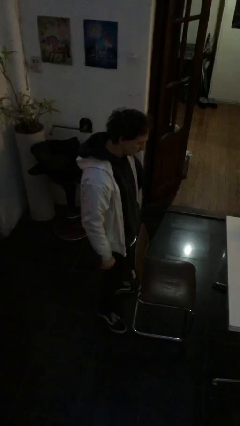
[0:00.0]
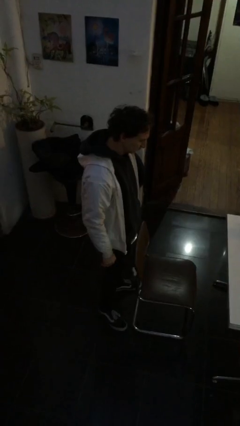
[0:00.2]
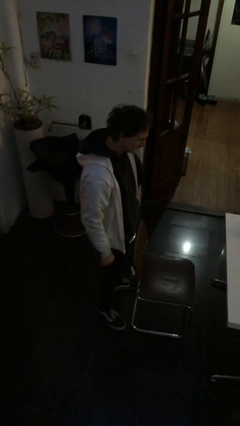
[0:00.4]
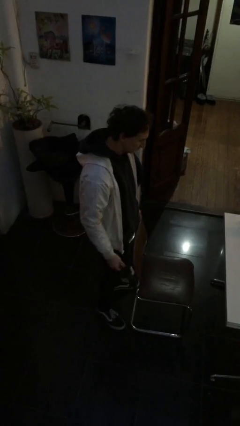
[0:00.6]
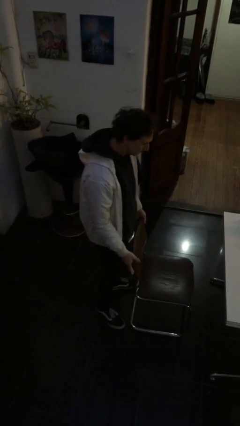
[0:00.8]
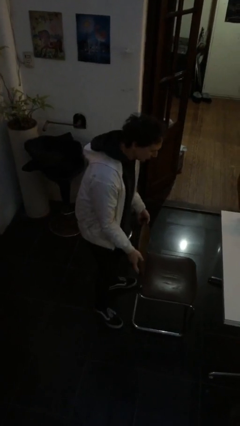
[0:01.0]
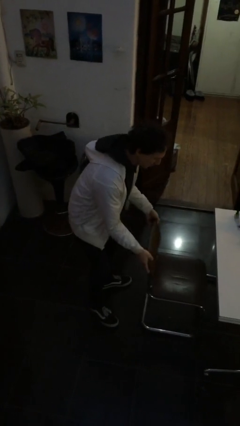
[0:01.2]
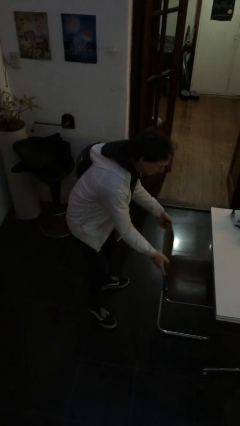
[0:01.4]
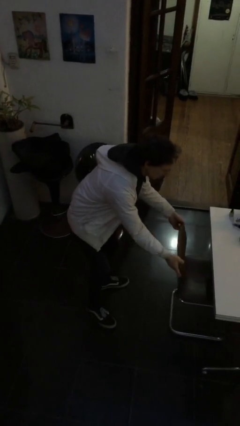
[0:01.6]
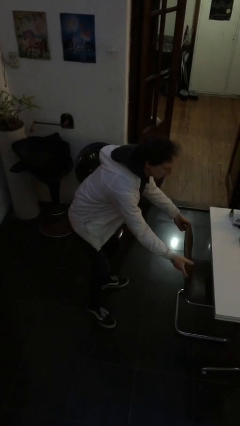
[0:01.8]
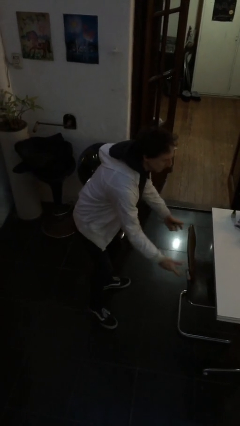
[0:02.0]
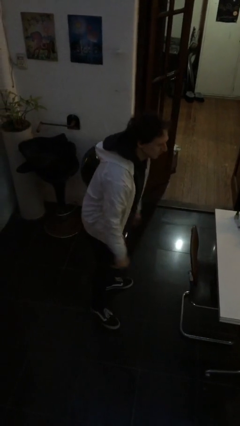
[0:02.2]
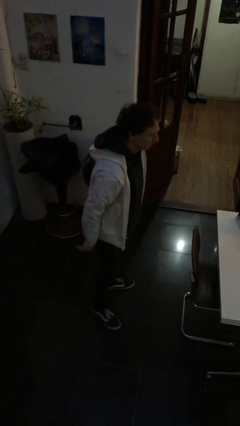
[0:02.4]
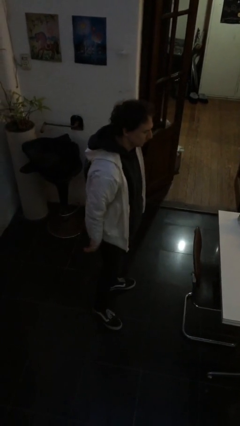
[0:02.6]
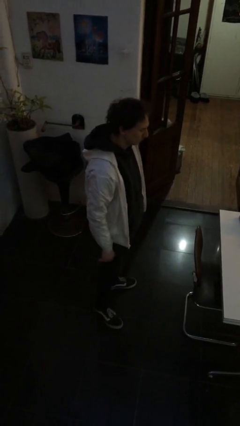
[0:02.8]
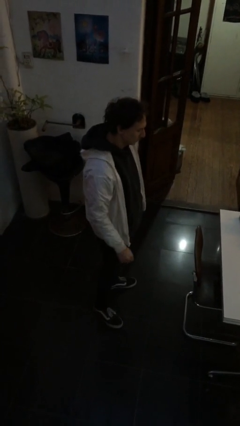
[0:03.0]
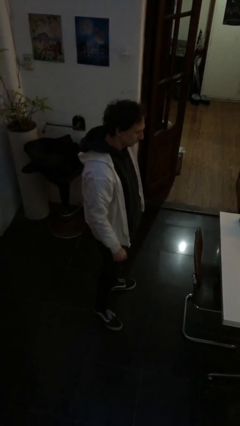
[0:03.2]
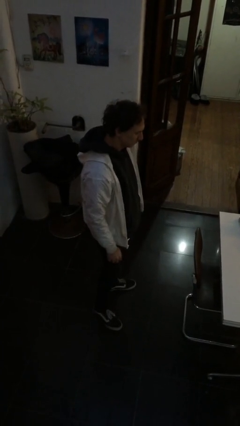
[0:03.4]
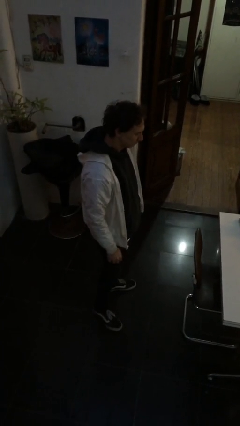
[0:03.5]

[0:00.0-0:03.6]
person pushes in chair

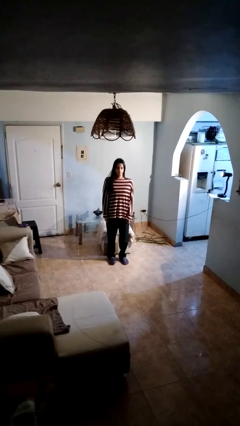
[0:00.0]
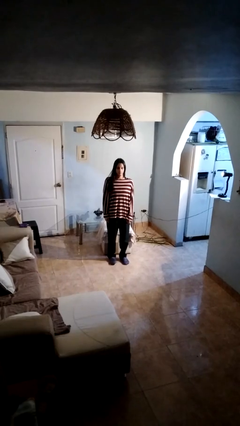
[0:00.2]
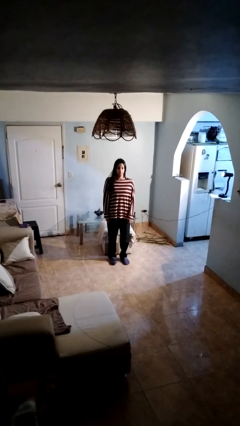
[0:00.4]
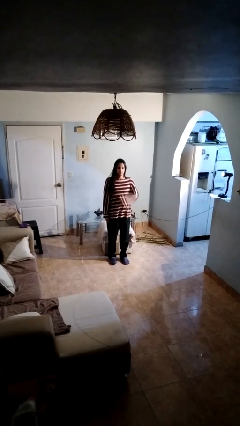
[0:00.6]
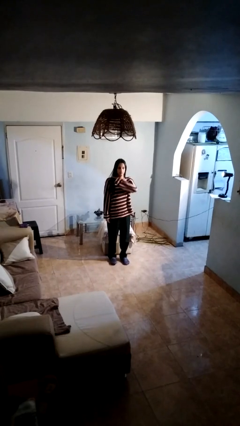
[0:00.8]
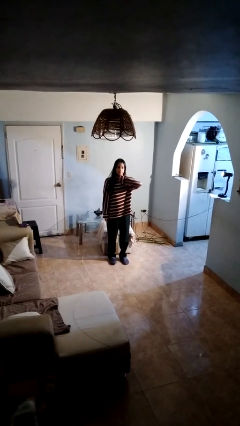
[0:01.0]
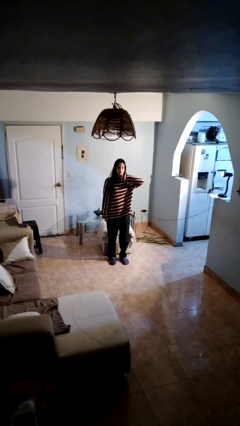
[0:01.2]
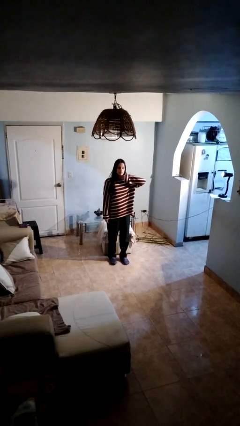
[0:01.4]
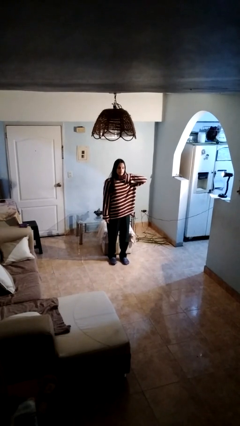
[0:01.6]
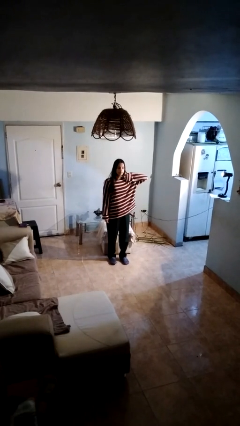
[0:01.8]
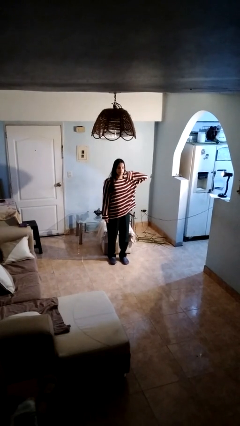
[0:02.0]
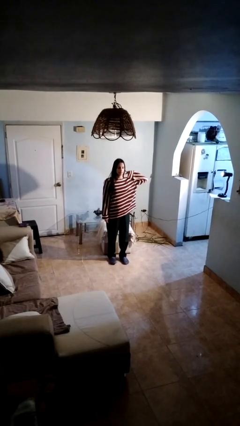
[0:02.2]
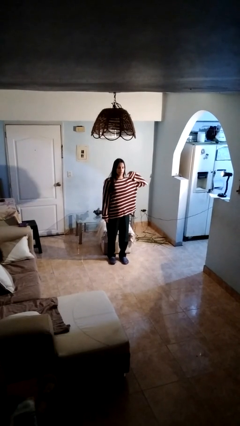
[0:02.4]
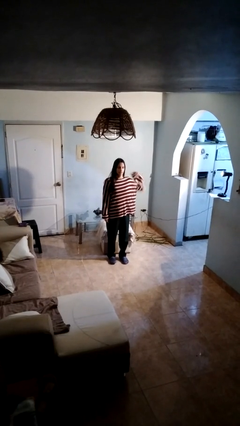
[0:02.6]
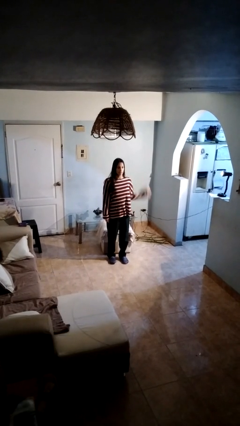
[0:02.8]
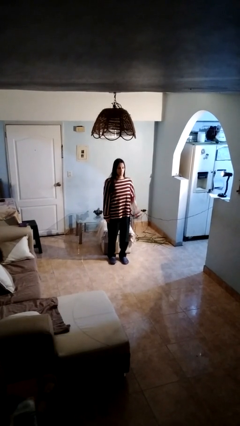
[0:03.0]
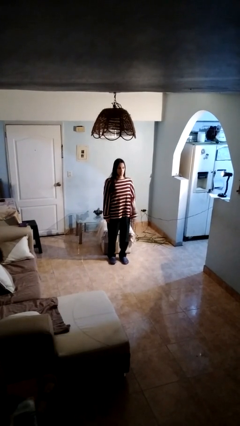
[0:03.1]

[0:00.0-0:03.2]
person gestures cut

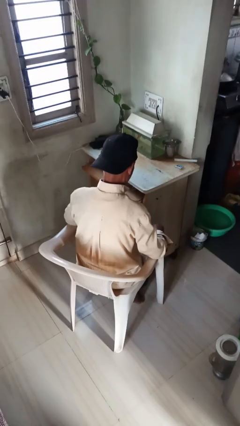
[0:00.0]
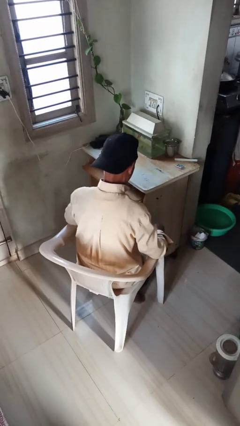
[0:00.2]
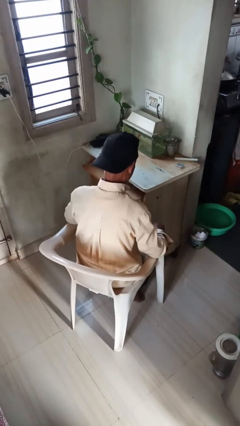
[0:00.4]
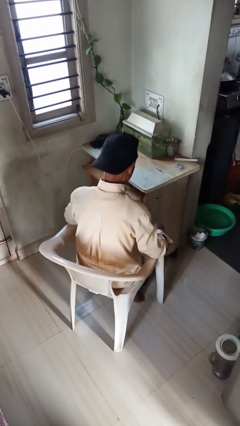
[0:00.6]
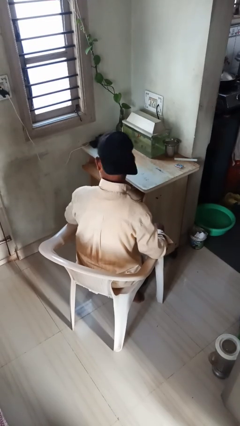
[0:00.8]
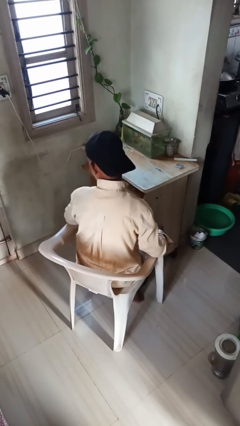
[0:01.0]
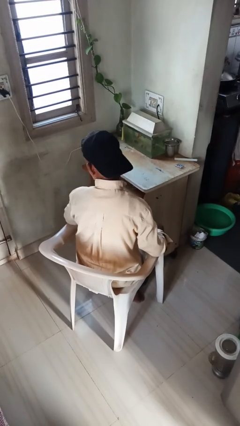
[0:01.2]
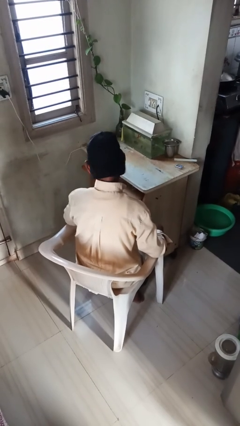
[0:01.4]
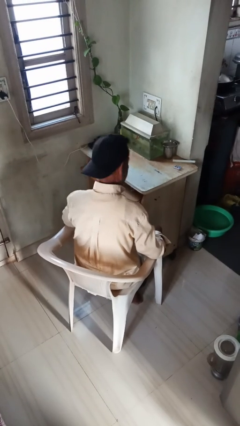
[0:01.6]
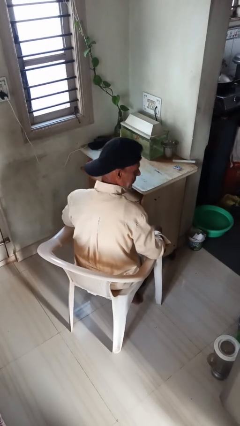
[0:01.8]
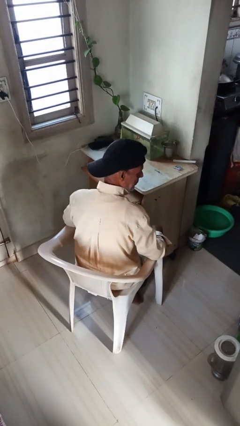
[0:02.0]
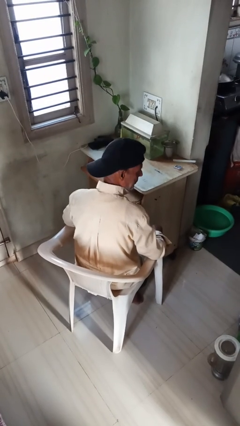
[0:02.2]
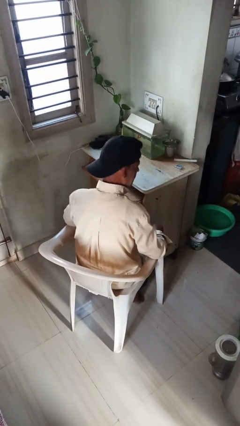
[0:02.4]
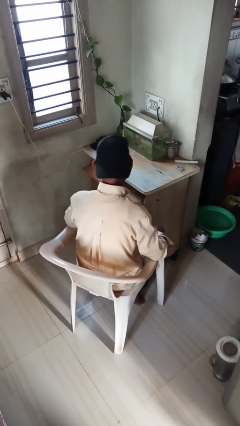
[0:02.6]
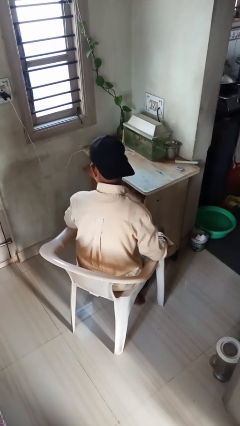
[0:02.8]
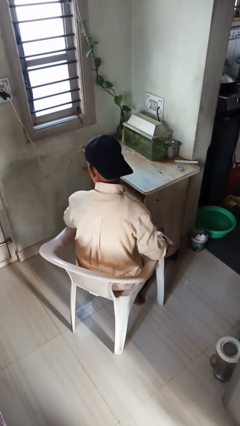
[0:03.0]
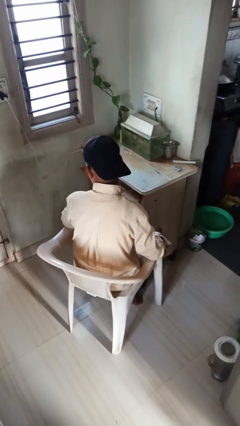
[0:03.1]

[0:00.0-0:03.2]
person shakes head

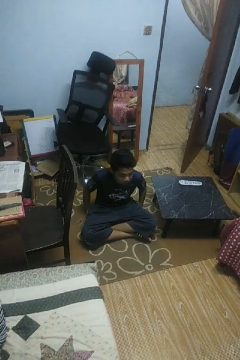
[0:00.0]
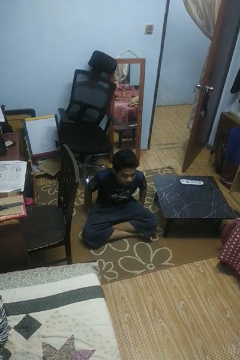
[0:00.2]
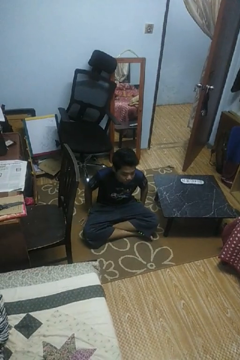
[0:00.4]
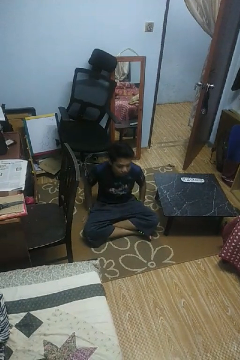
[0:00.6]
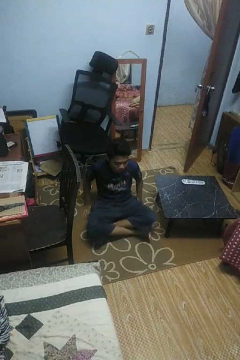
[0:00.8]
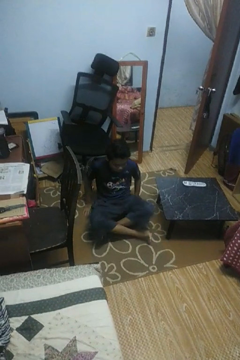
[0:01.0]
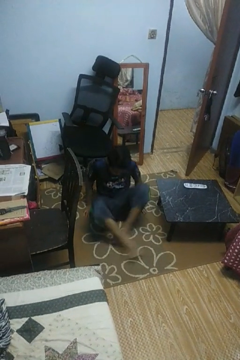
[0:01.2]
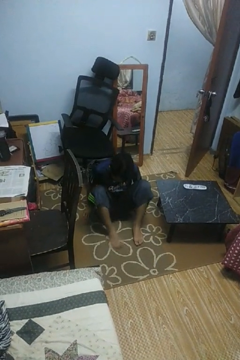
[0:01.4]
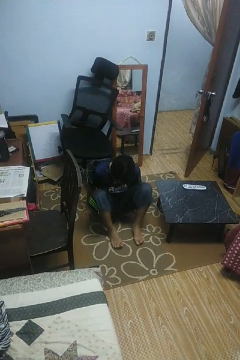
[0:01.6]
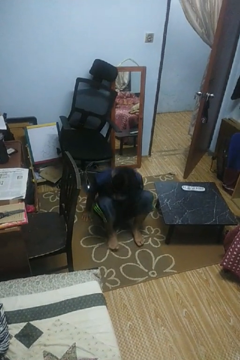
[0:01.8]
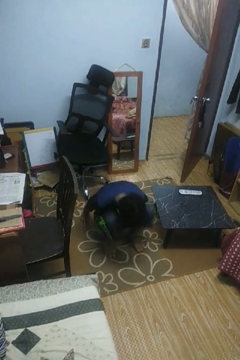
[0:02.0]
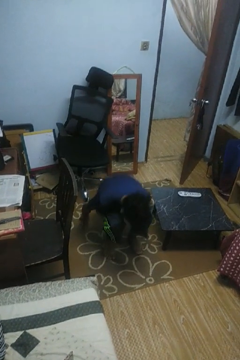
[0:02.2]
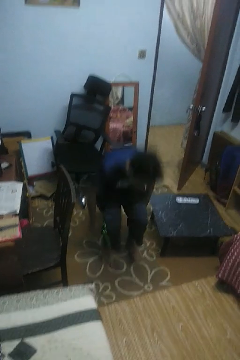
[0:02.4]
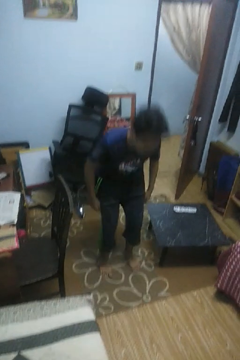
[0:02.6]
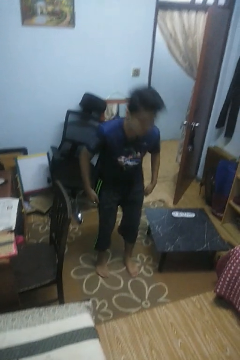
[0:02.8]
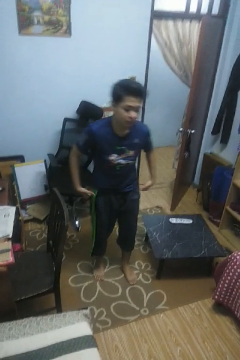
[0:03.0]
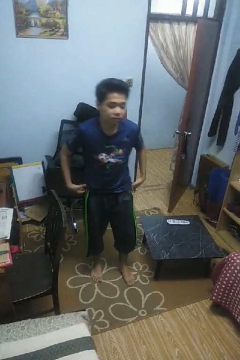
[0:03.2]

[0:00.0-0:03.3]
person stands up from floor

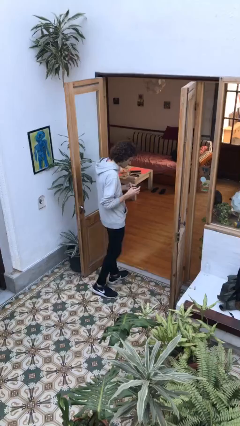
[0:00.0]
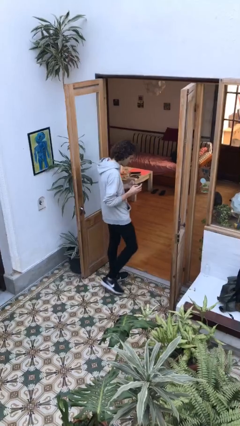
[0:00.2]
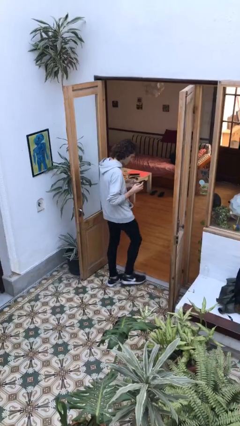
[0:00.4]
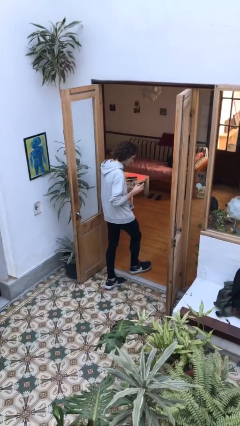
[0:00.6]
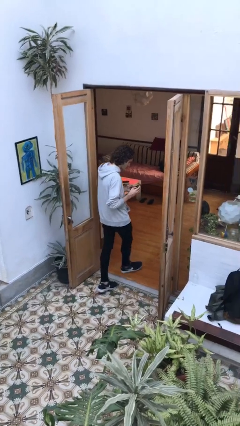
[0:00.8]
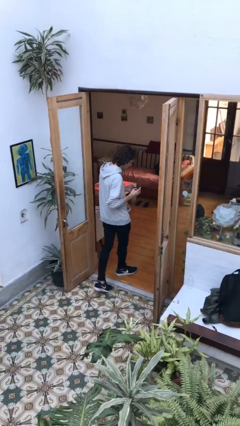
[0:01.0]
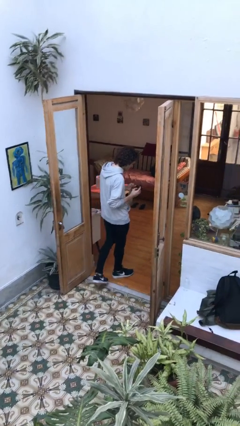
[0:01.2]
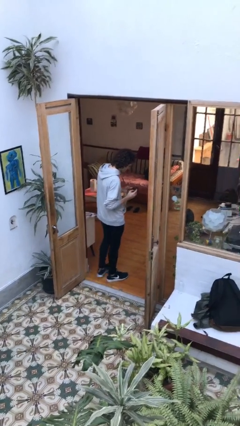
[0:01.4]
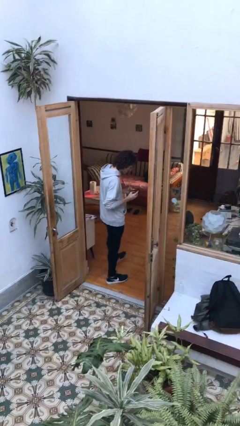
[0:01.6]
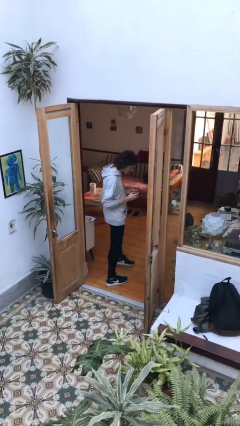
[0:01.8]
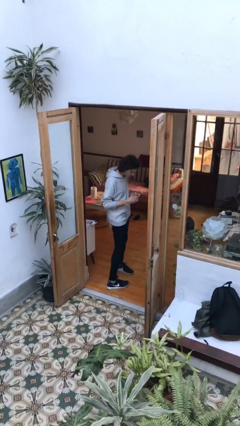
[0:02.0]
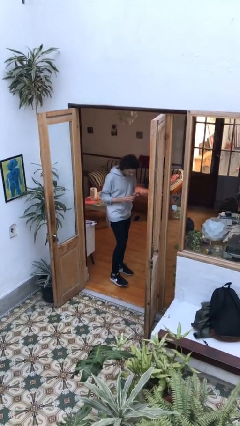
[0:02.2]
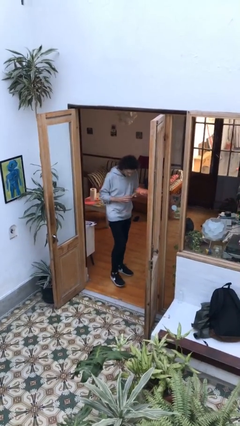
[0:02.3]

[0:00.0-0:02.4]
person exits scene through structure

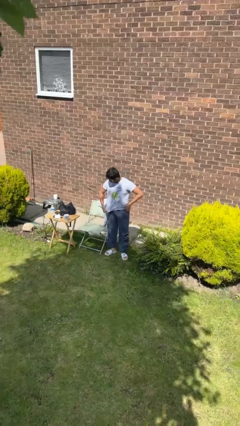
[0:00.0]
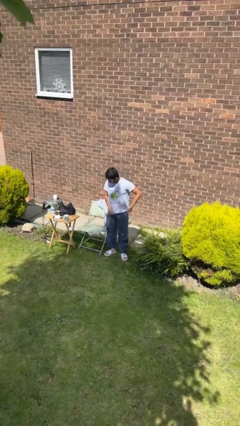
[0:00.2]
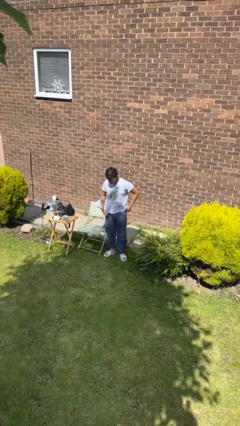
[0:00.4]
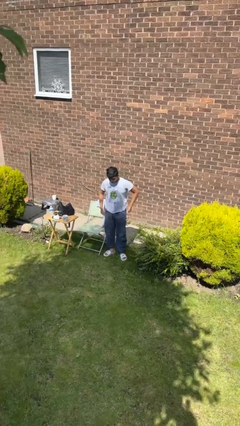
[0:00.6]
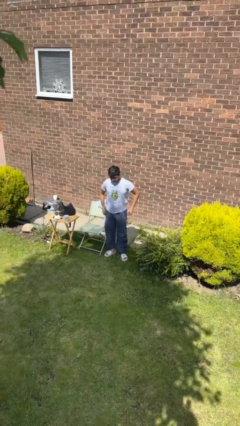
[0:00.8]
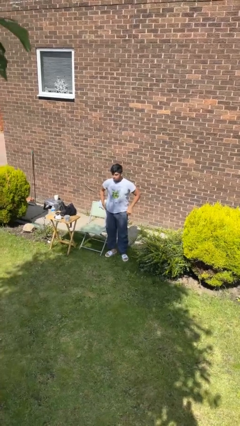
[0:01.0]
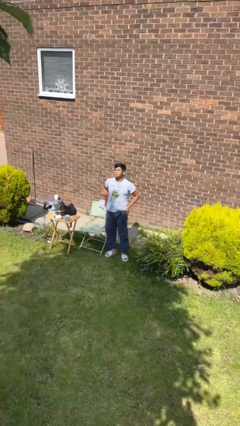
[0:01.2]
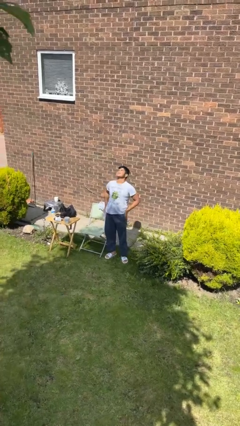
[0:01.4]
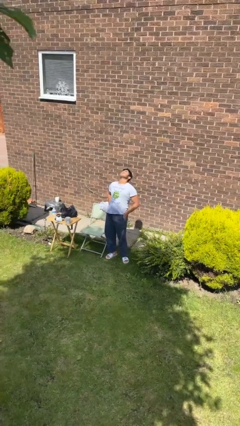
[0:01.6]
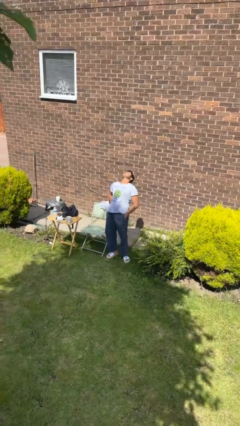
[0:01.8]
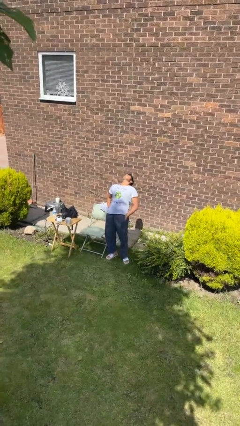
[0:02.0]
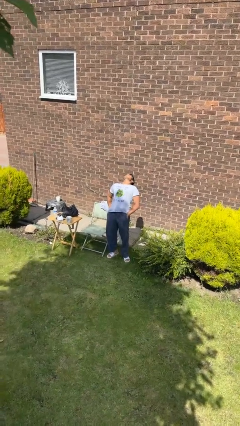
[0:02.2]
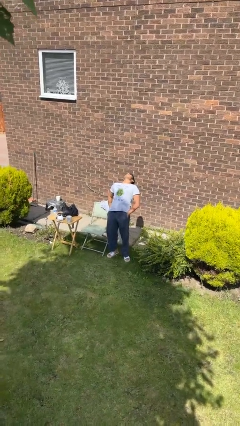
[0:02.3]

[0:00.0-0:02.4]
person stretches back
